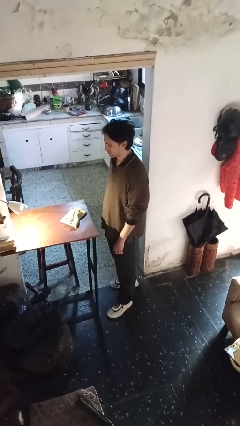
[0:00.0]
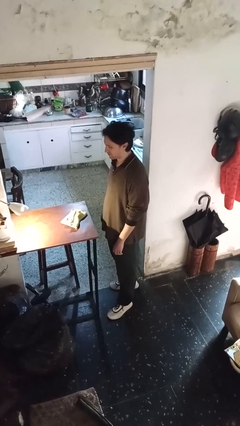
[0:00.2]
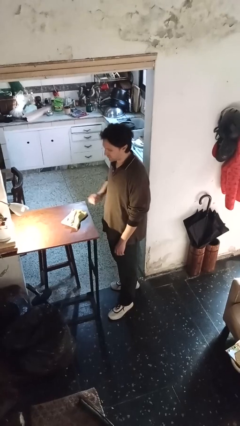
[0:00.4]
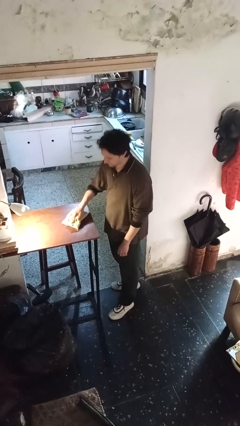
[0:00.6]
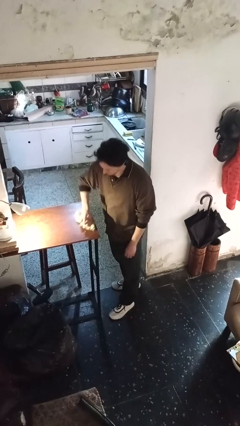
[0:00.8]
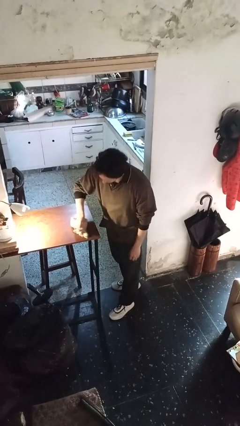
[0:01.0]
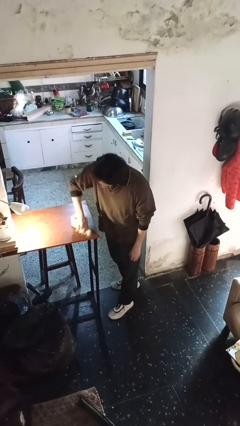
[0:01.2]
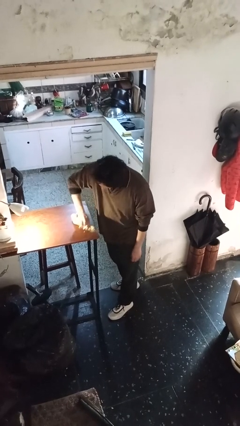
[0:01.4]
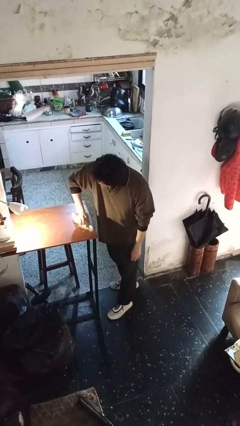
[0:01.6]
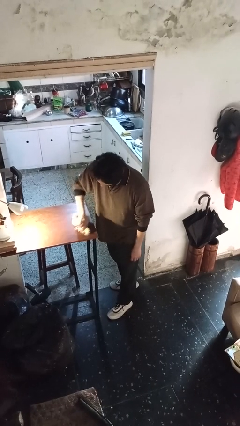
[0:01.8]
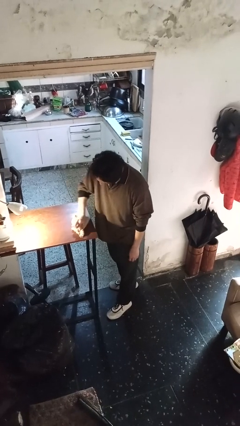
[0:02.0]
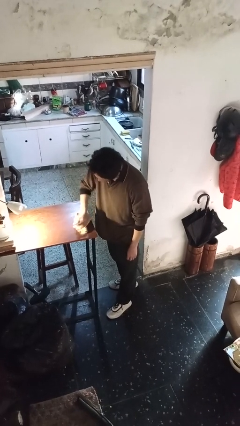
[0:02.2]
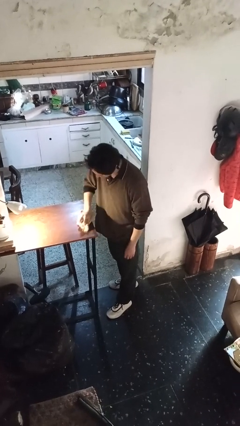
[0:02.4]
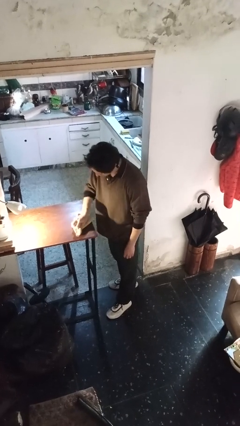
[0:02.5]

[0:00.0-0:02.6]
person cleans table with rag

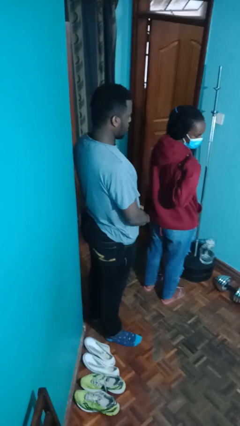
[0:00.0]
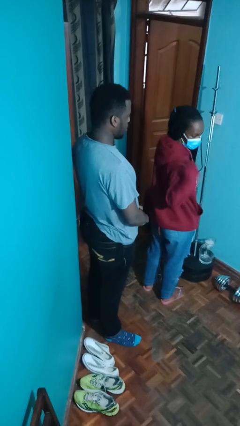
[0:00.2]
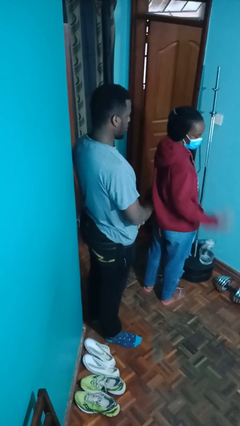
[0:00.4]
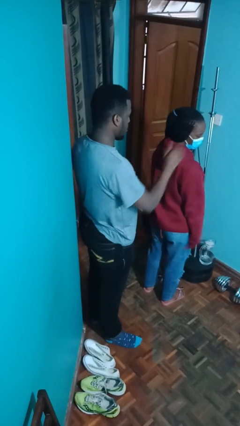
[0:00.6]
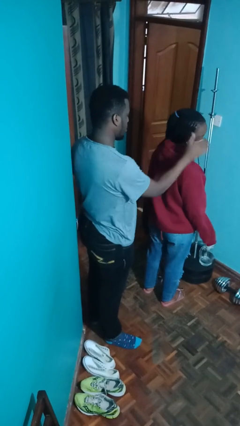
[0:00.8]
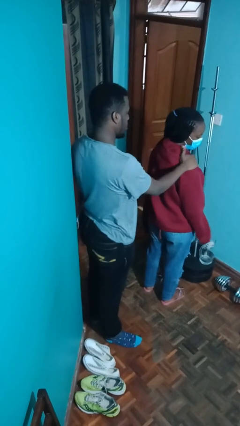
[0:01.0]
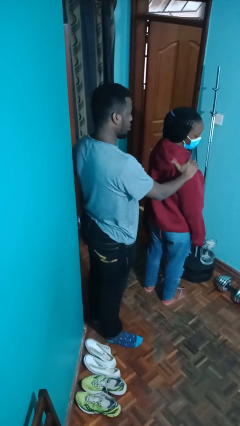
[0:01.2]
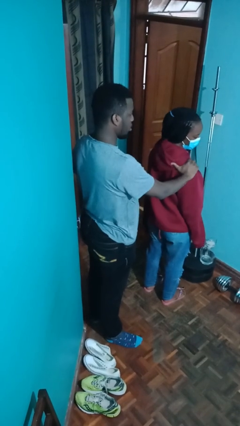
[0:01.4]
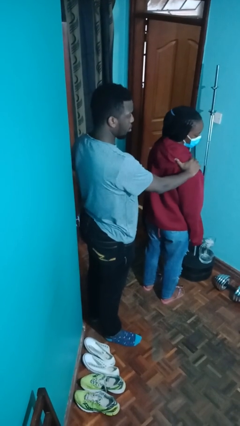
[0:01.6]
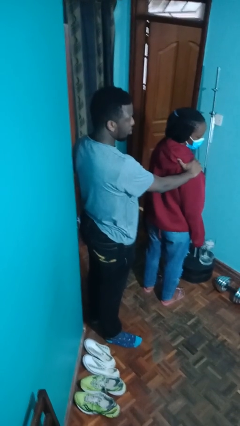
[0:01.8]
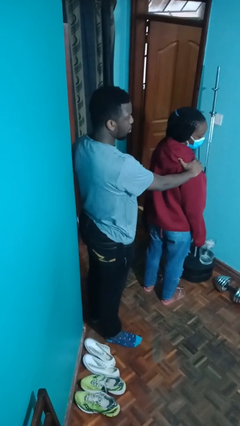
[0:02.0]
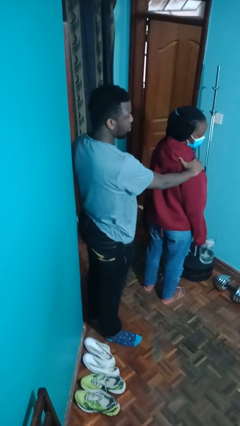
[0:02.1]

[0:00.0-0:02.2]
person grabs person by shoulder

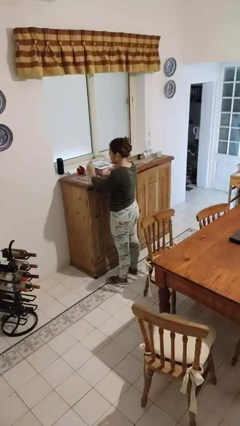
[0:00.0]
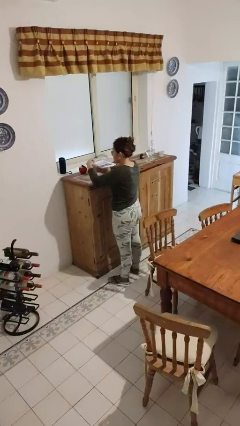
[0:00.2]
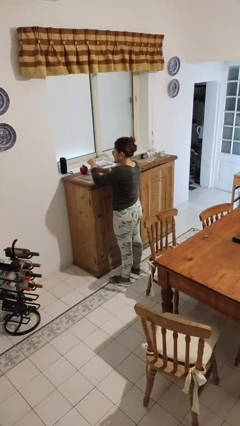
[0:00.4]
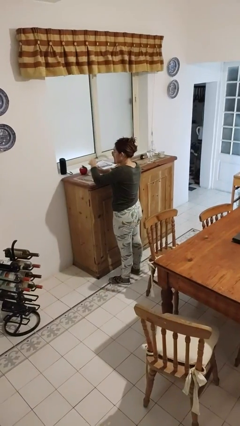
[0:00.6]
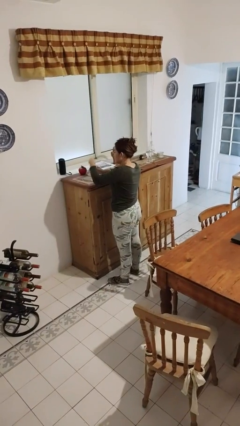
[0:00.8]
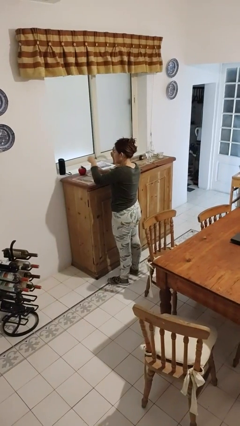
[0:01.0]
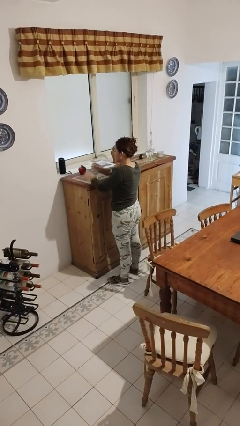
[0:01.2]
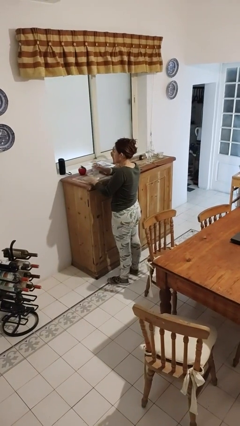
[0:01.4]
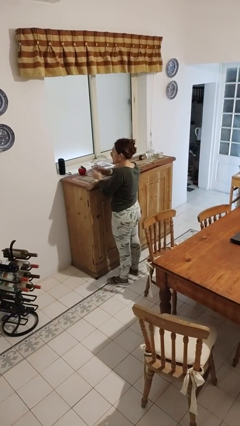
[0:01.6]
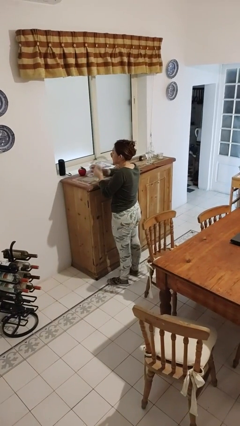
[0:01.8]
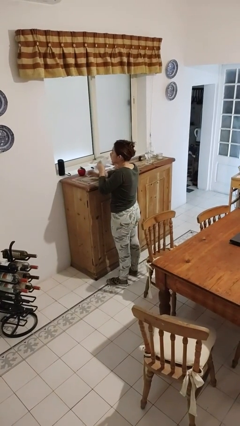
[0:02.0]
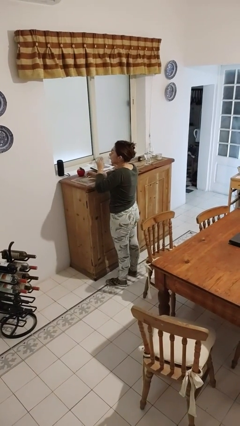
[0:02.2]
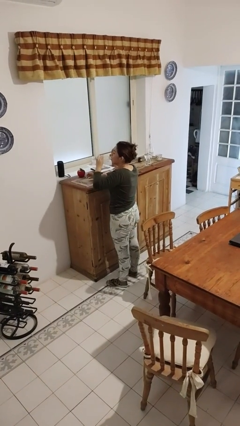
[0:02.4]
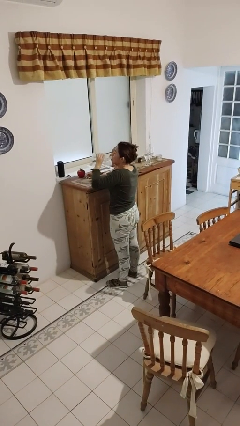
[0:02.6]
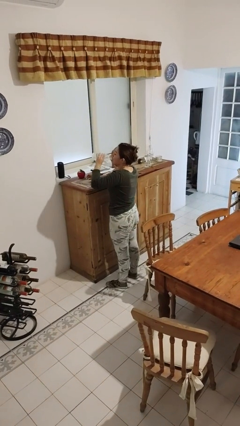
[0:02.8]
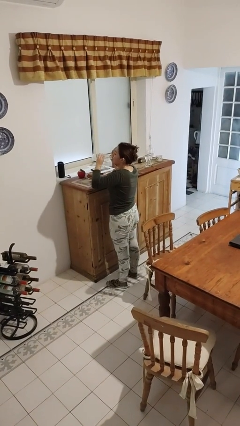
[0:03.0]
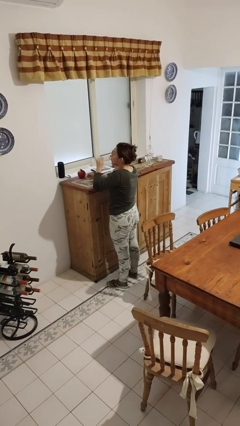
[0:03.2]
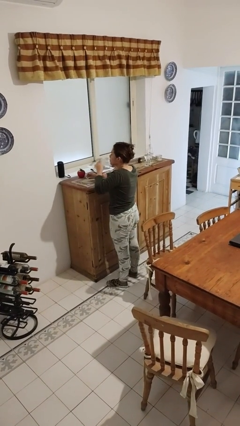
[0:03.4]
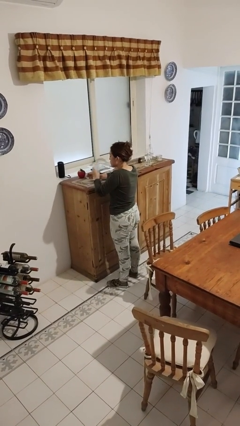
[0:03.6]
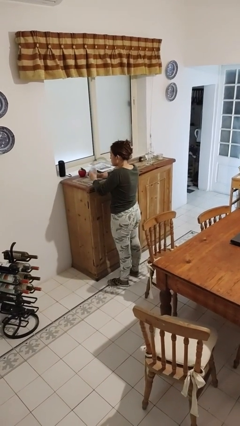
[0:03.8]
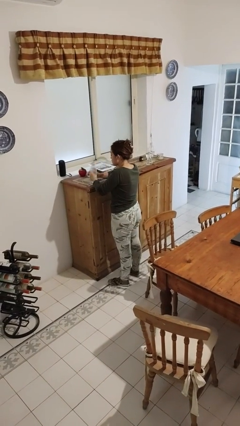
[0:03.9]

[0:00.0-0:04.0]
person drinks from bottle

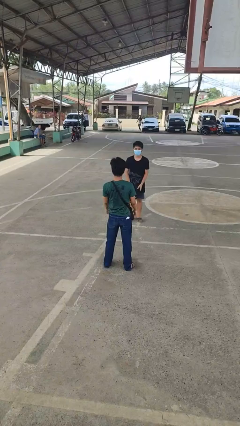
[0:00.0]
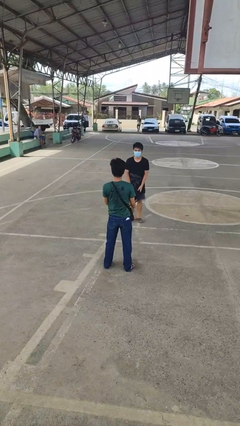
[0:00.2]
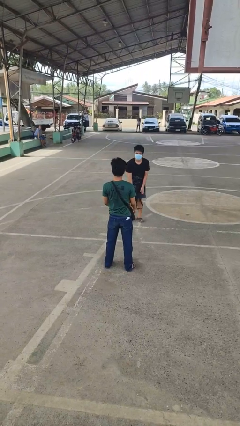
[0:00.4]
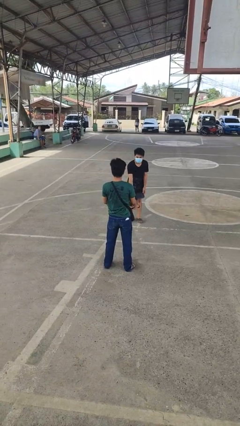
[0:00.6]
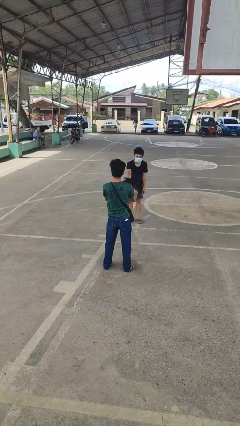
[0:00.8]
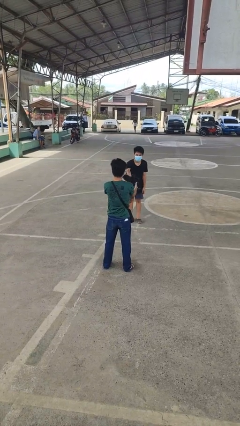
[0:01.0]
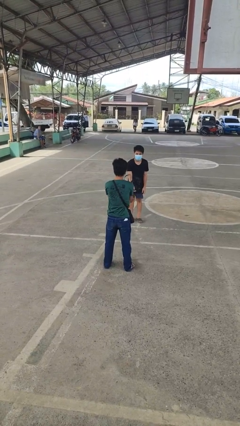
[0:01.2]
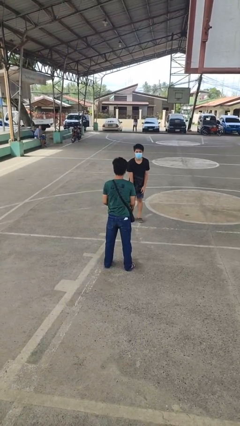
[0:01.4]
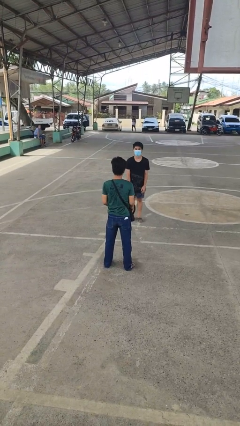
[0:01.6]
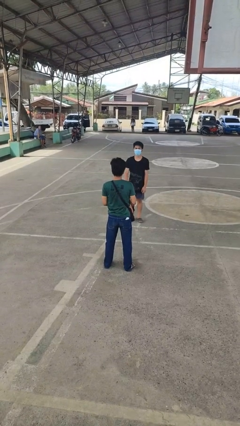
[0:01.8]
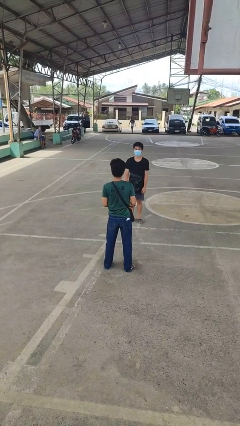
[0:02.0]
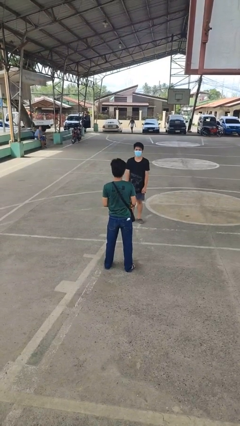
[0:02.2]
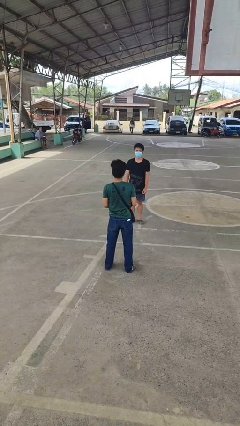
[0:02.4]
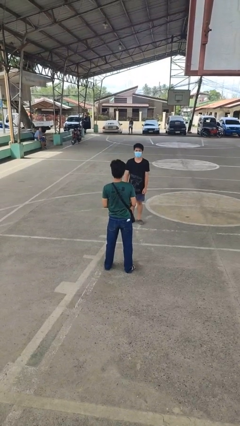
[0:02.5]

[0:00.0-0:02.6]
person catches object from person

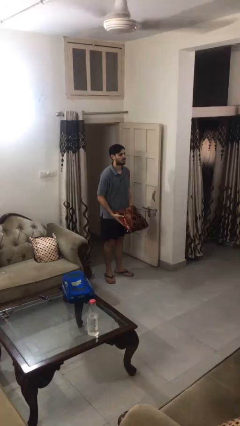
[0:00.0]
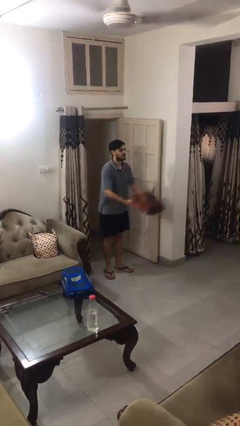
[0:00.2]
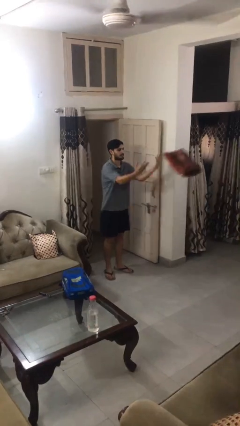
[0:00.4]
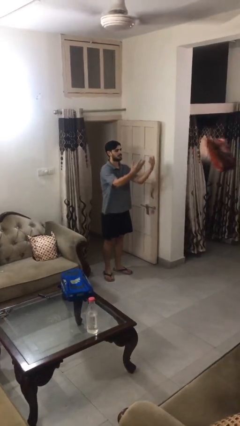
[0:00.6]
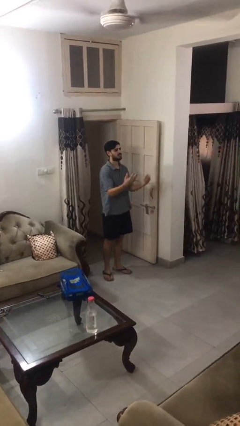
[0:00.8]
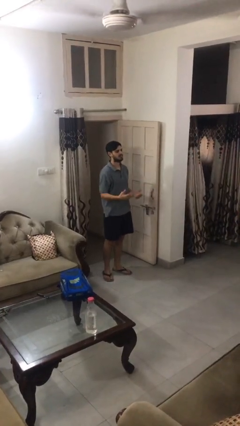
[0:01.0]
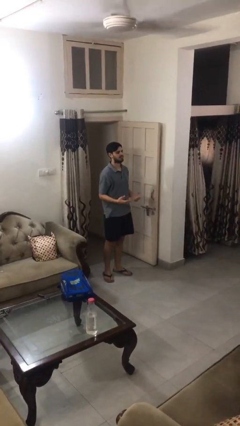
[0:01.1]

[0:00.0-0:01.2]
person throws object to person

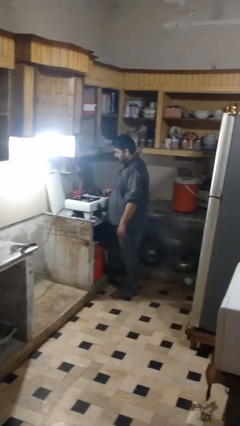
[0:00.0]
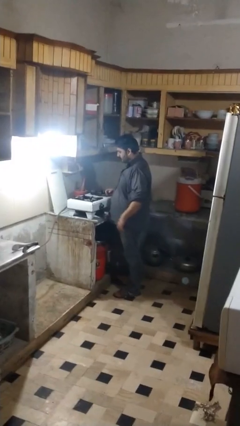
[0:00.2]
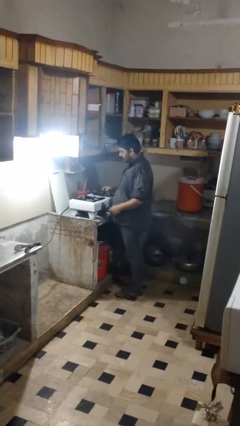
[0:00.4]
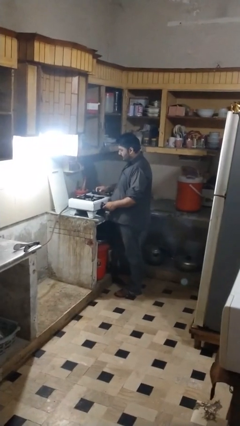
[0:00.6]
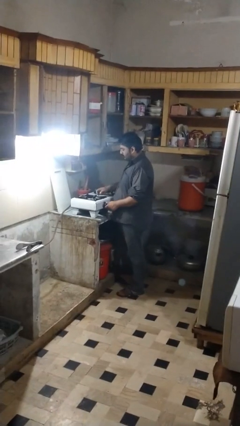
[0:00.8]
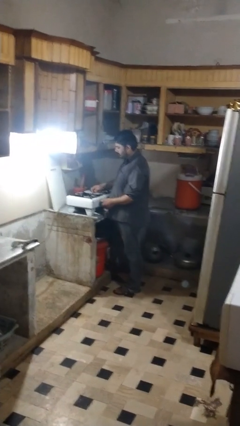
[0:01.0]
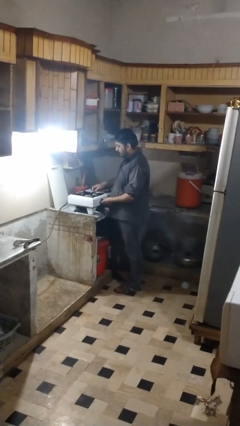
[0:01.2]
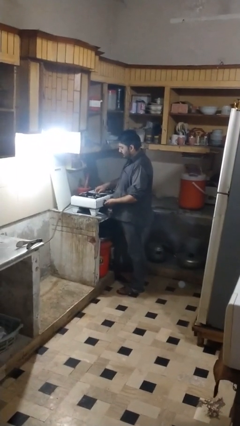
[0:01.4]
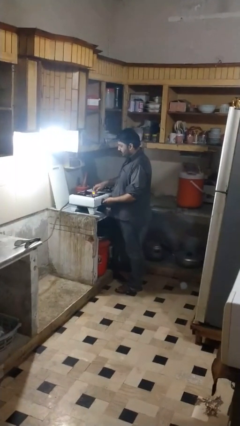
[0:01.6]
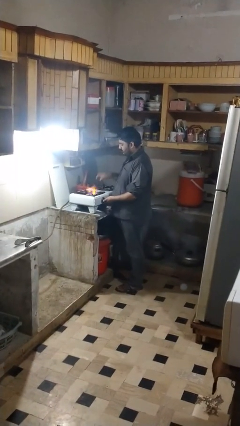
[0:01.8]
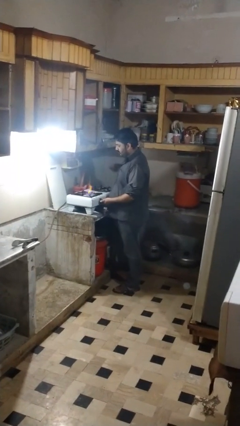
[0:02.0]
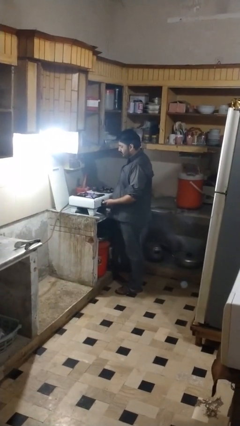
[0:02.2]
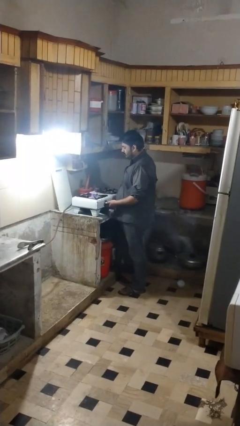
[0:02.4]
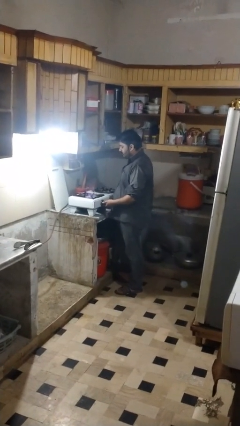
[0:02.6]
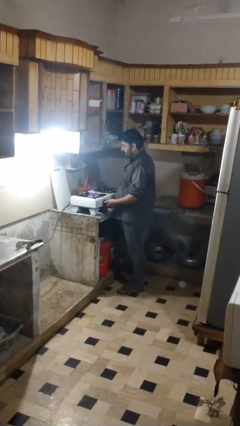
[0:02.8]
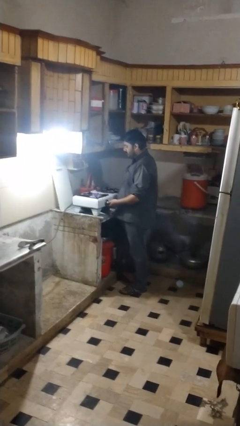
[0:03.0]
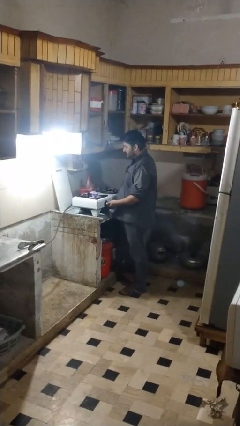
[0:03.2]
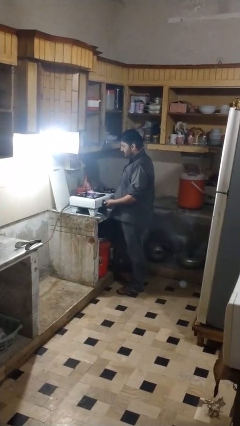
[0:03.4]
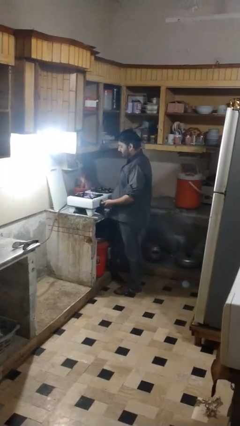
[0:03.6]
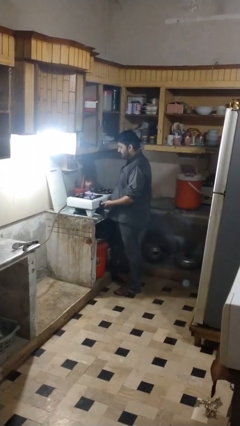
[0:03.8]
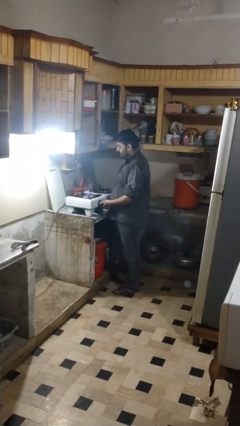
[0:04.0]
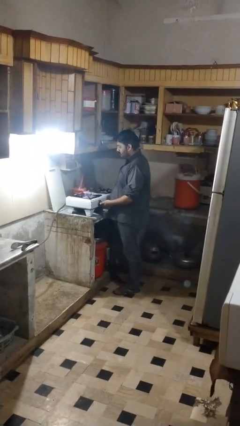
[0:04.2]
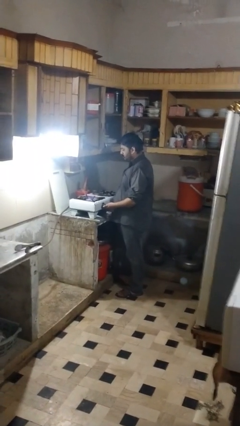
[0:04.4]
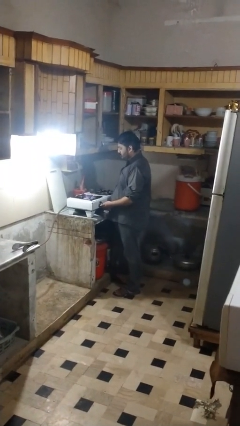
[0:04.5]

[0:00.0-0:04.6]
person turns on stovetop

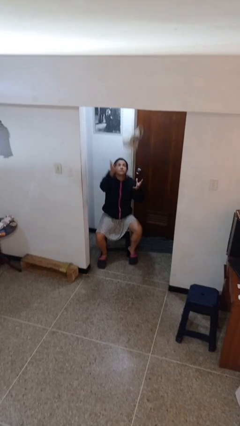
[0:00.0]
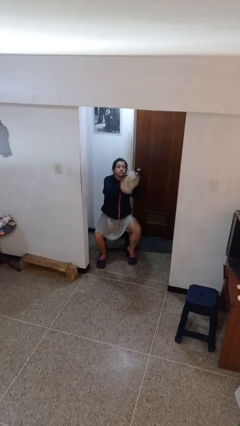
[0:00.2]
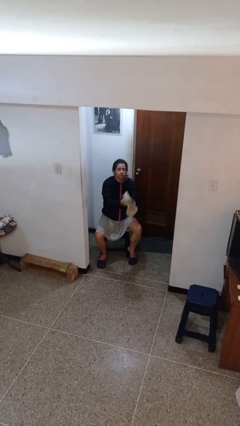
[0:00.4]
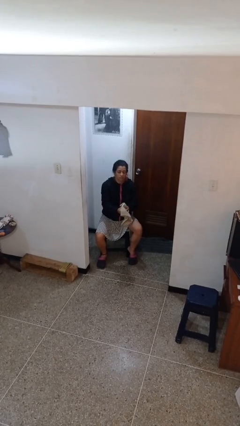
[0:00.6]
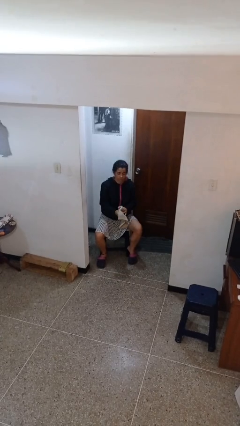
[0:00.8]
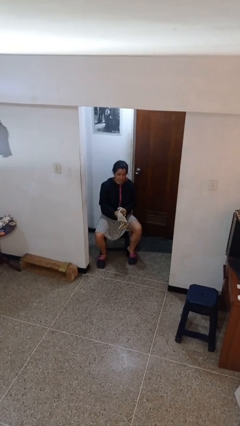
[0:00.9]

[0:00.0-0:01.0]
person catches dropped object
